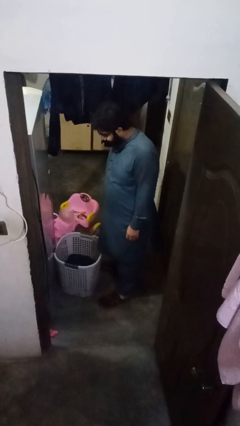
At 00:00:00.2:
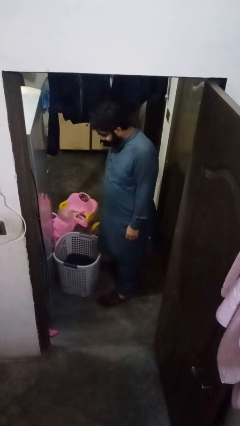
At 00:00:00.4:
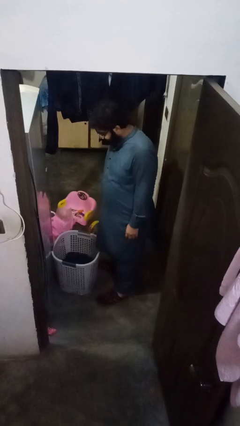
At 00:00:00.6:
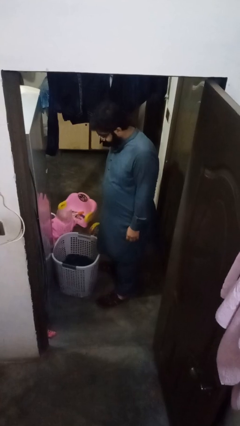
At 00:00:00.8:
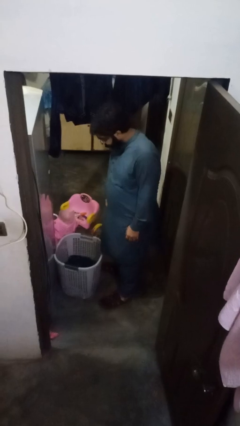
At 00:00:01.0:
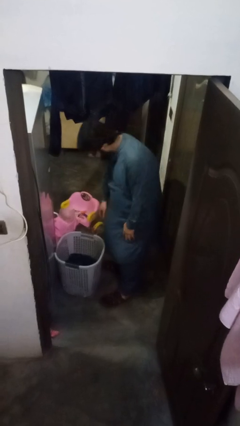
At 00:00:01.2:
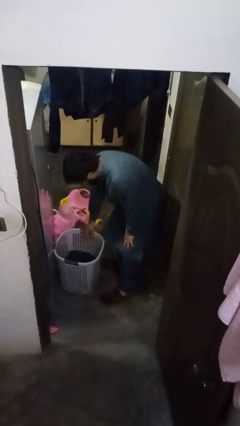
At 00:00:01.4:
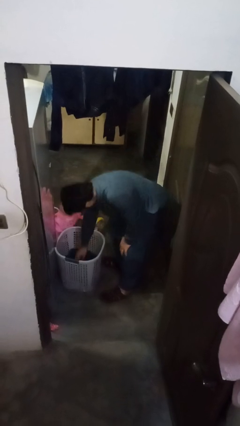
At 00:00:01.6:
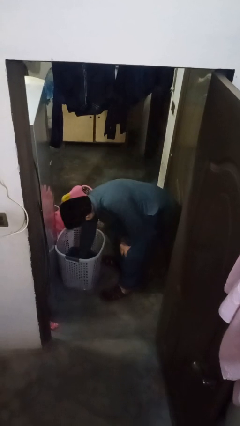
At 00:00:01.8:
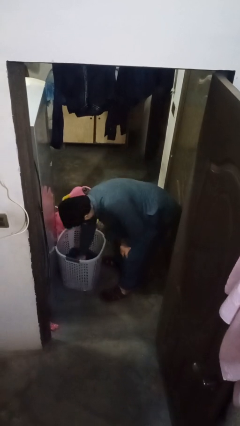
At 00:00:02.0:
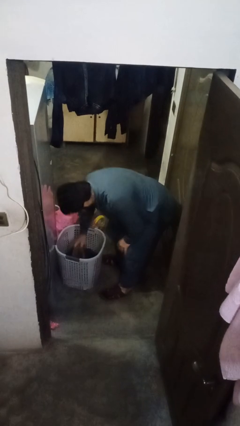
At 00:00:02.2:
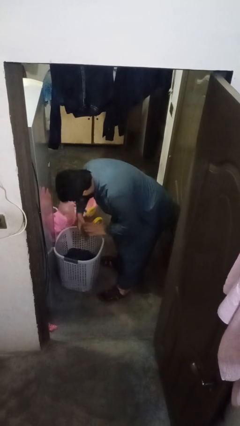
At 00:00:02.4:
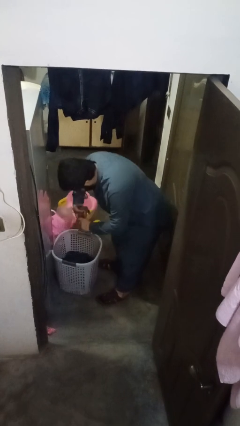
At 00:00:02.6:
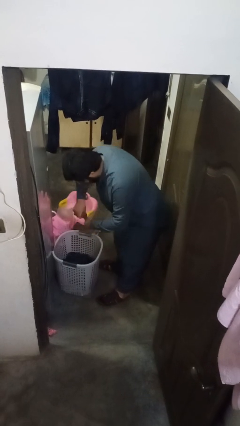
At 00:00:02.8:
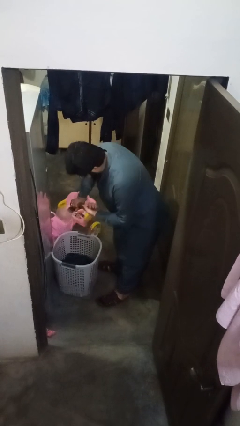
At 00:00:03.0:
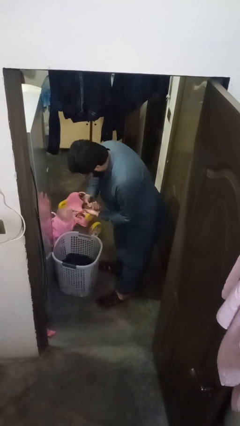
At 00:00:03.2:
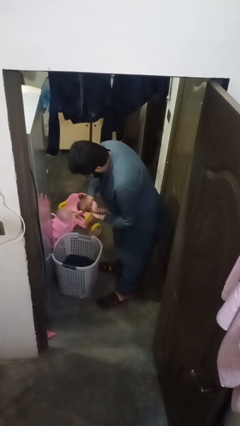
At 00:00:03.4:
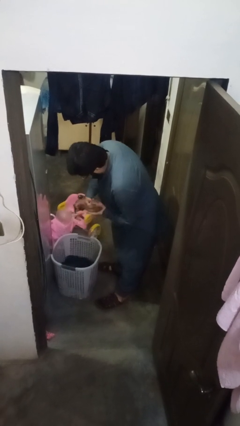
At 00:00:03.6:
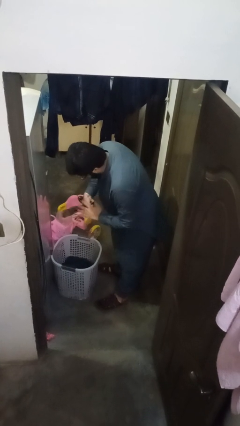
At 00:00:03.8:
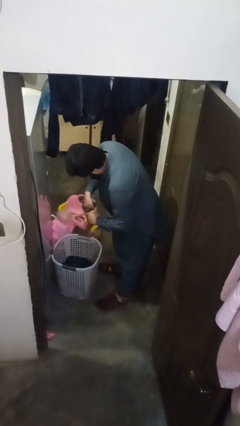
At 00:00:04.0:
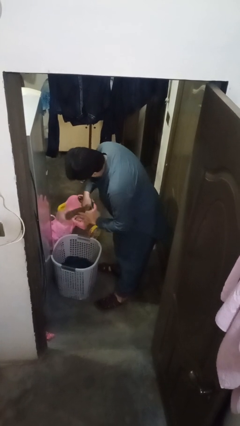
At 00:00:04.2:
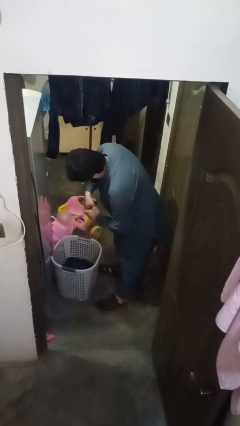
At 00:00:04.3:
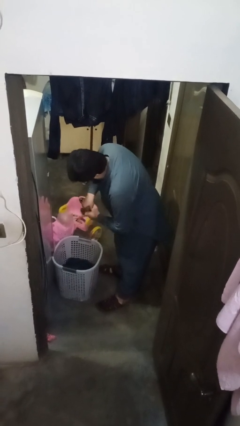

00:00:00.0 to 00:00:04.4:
person folds socks

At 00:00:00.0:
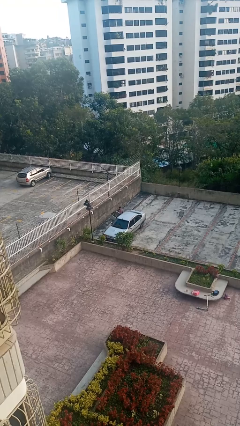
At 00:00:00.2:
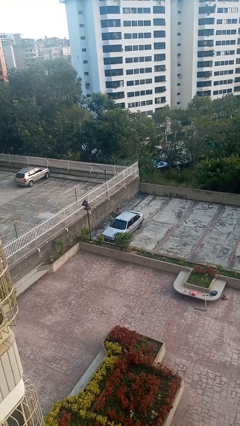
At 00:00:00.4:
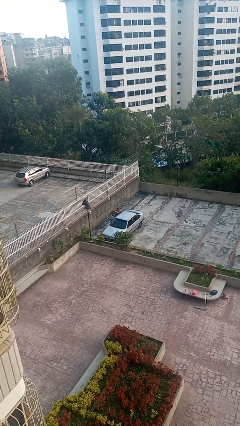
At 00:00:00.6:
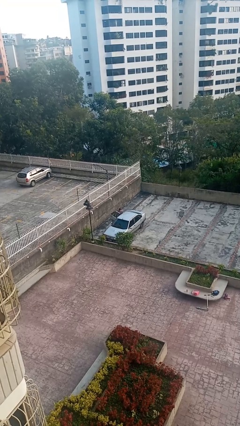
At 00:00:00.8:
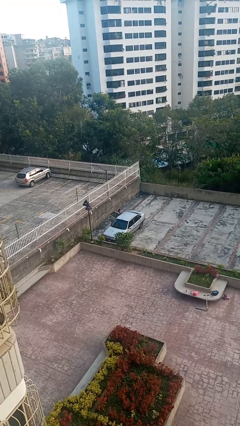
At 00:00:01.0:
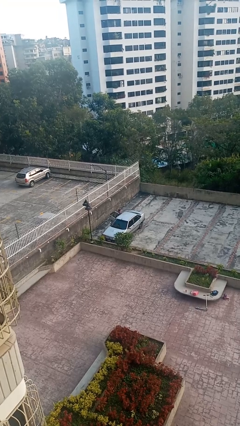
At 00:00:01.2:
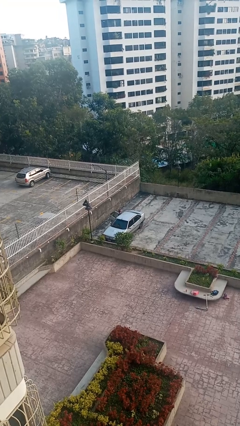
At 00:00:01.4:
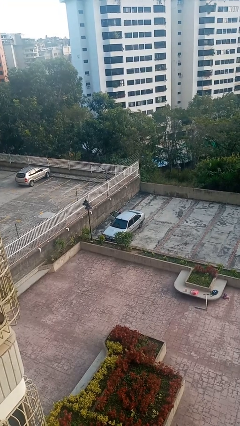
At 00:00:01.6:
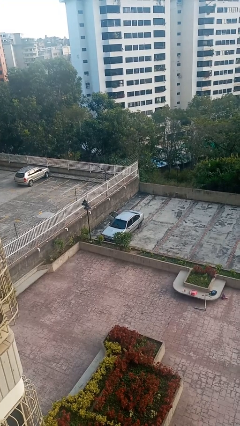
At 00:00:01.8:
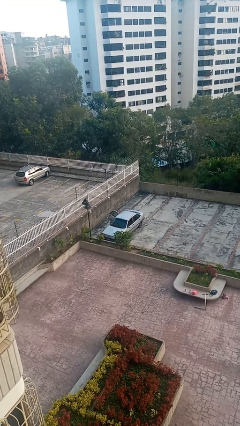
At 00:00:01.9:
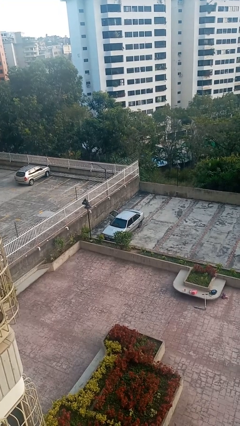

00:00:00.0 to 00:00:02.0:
person enters car

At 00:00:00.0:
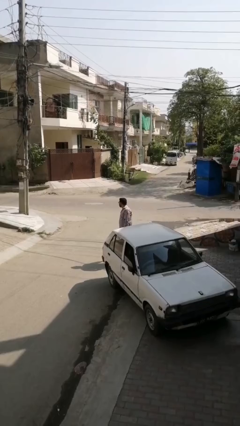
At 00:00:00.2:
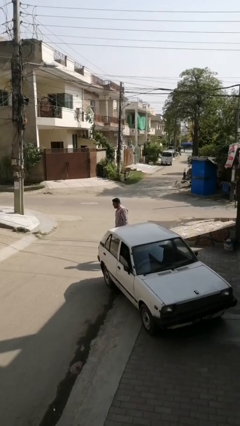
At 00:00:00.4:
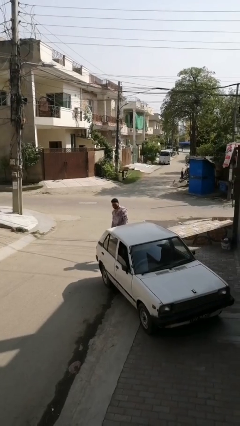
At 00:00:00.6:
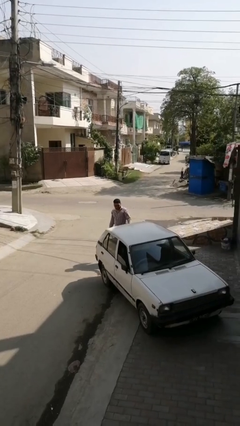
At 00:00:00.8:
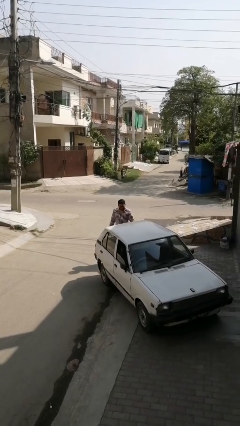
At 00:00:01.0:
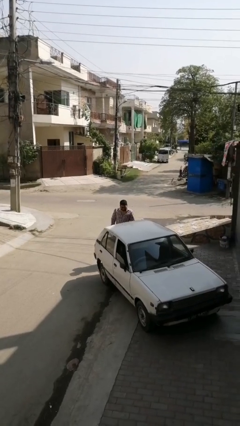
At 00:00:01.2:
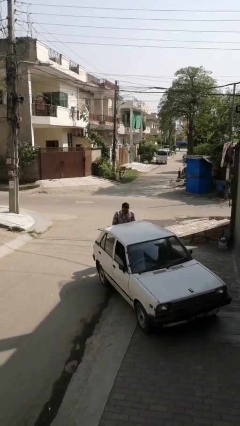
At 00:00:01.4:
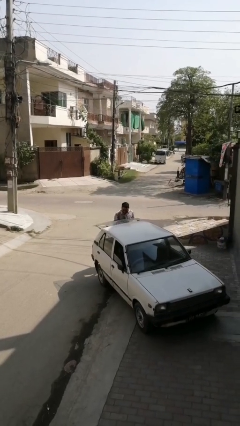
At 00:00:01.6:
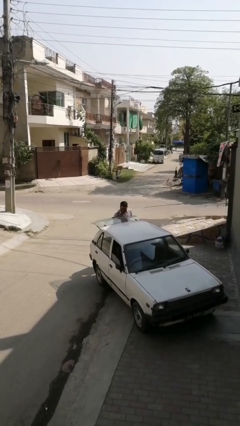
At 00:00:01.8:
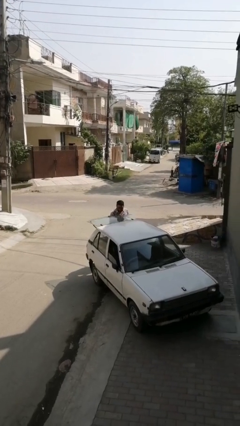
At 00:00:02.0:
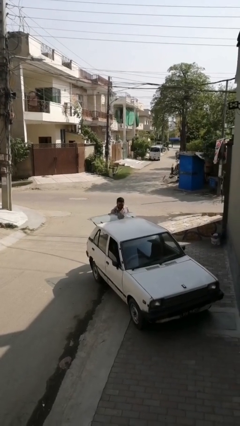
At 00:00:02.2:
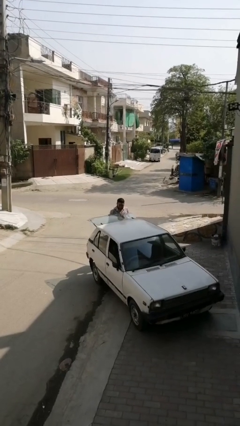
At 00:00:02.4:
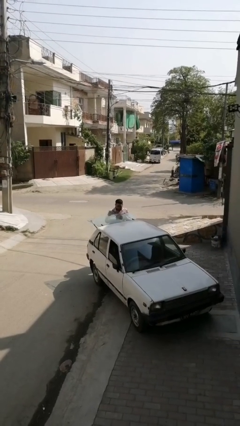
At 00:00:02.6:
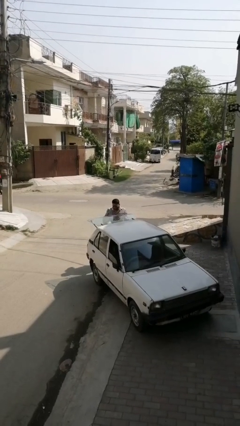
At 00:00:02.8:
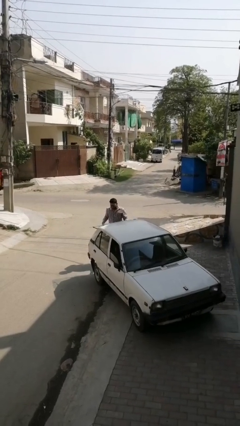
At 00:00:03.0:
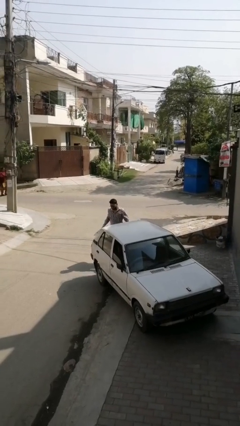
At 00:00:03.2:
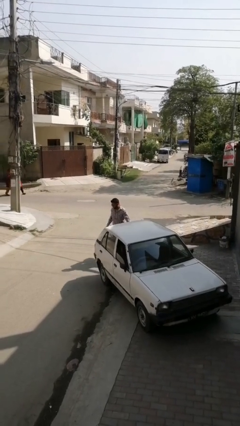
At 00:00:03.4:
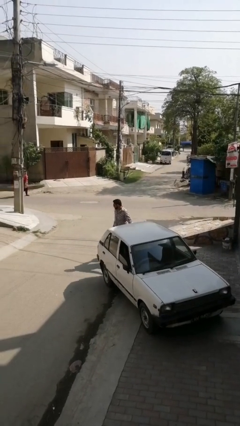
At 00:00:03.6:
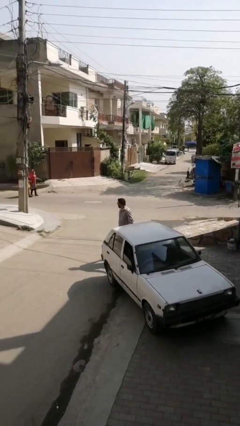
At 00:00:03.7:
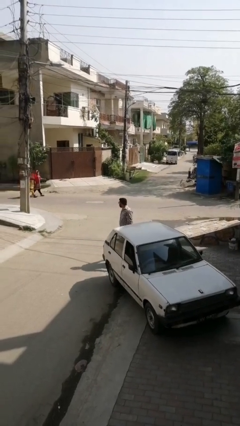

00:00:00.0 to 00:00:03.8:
person unloads car

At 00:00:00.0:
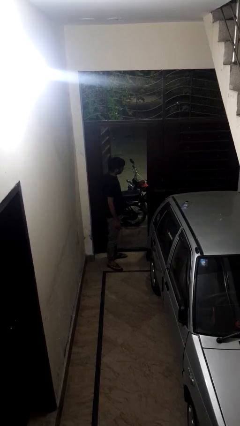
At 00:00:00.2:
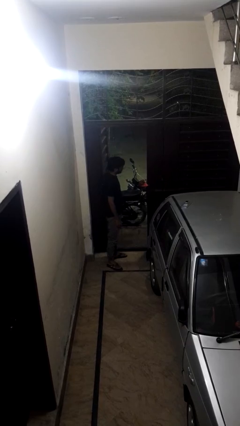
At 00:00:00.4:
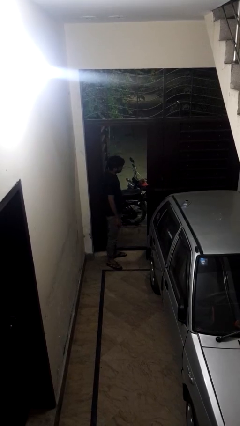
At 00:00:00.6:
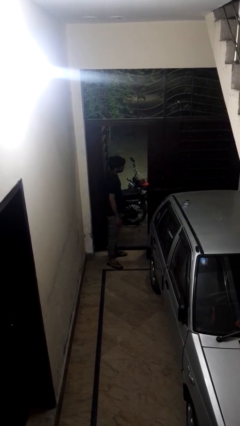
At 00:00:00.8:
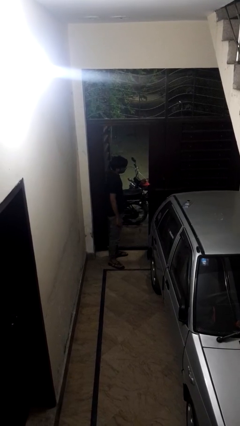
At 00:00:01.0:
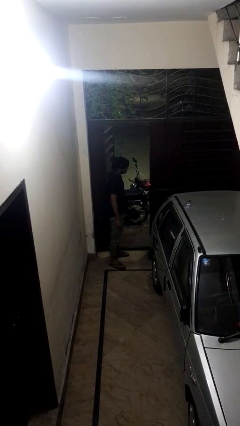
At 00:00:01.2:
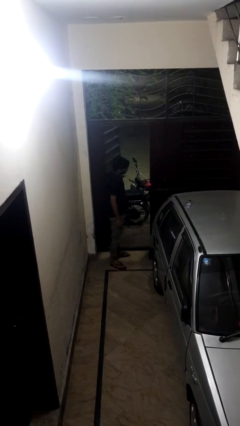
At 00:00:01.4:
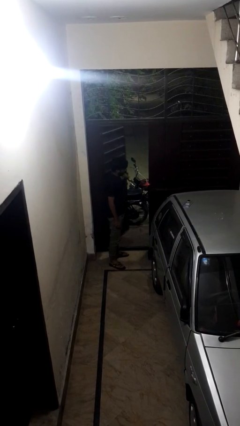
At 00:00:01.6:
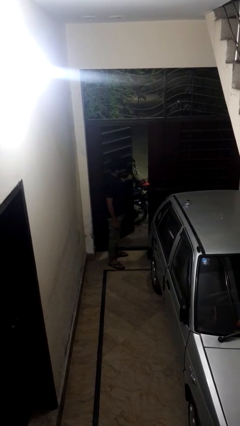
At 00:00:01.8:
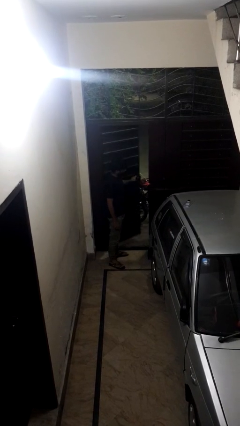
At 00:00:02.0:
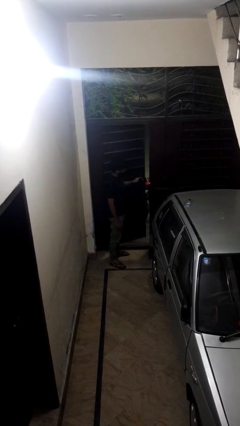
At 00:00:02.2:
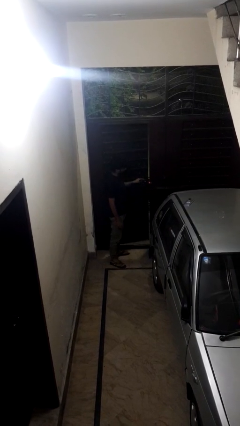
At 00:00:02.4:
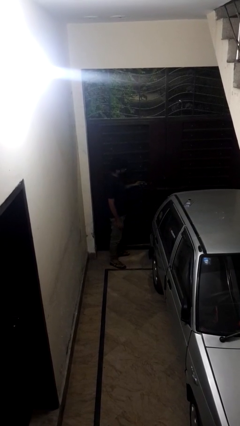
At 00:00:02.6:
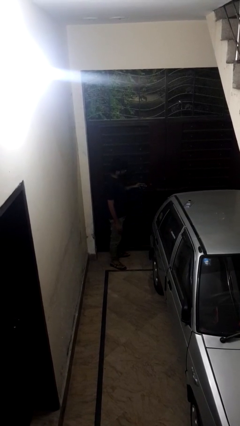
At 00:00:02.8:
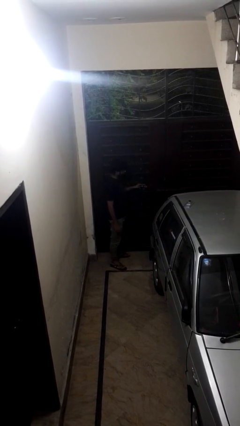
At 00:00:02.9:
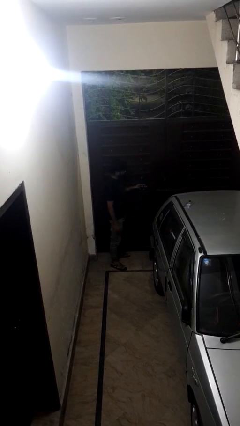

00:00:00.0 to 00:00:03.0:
person closes gate

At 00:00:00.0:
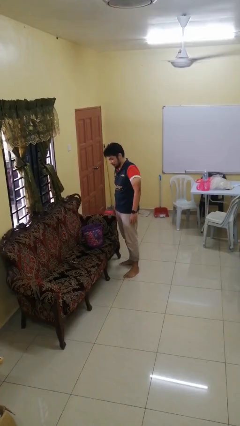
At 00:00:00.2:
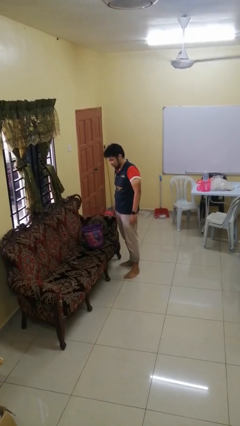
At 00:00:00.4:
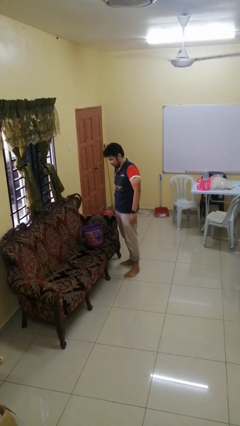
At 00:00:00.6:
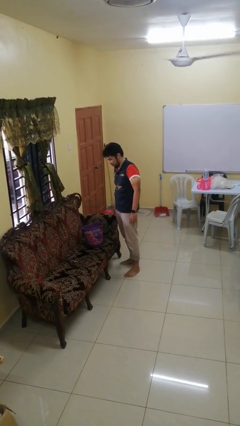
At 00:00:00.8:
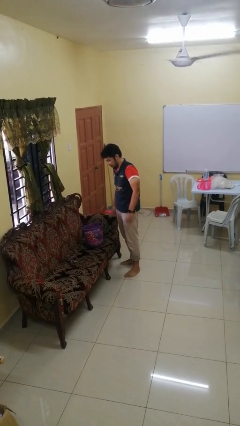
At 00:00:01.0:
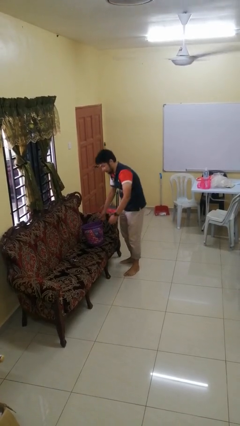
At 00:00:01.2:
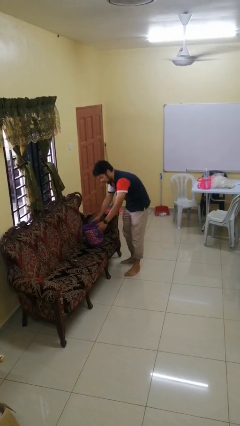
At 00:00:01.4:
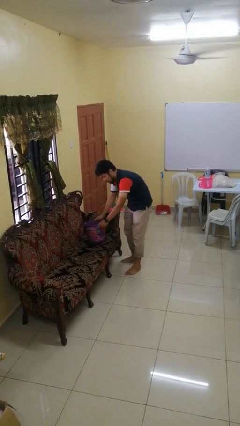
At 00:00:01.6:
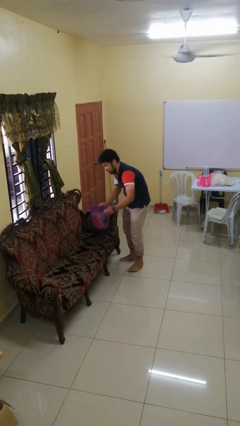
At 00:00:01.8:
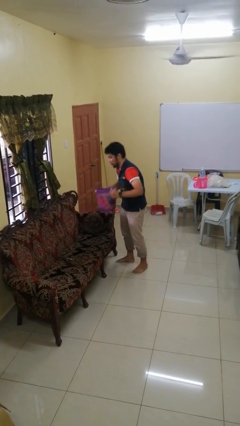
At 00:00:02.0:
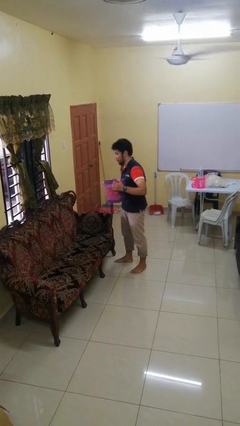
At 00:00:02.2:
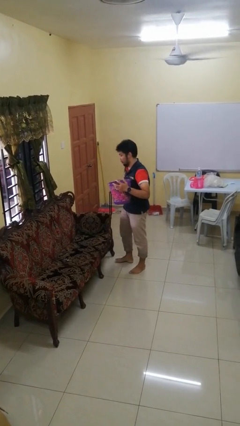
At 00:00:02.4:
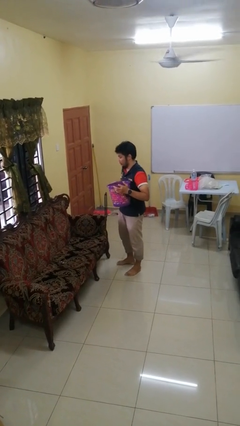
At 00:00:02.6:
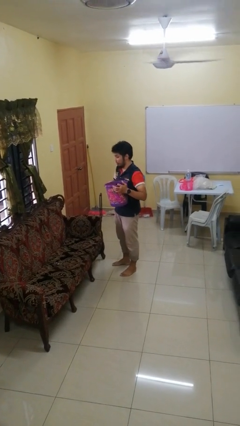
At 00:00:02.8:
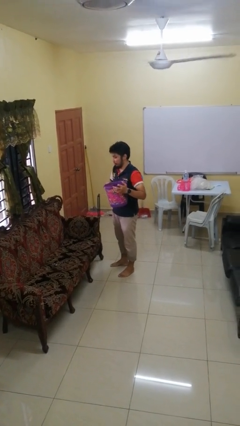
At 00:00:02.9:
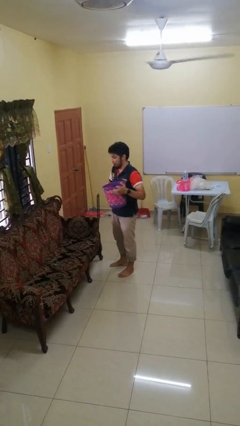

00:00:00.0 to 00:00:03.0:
person picks up object from couch

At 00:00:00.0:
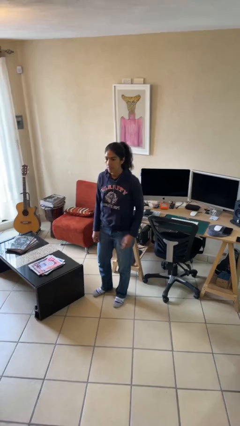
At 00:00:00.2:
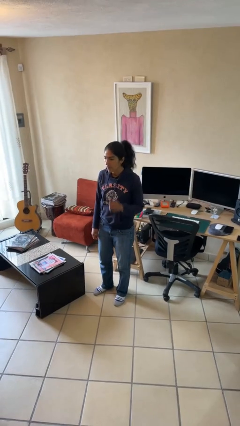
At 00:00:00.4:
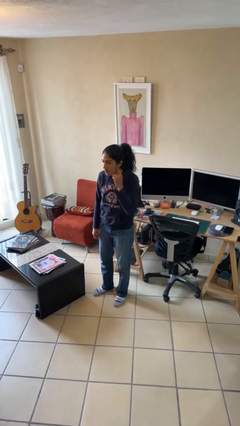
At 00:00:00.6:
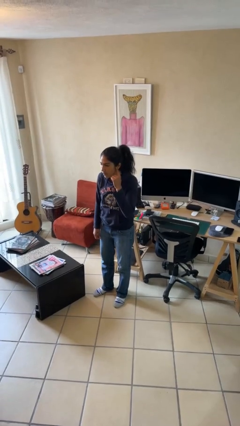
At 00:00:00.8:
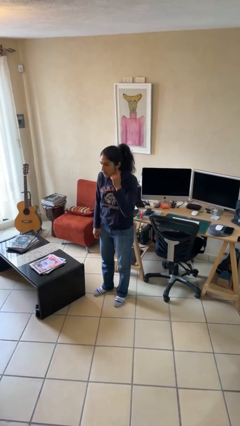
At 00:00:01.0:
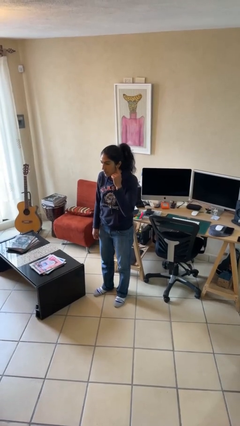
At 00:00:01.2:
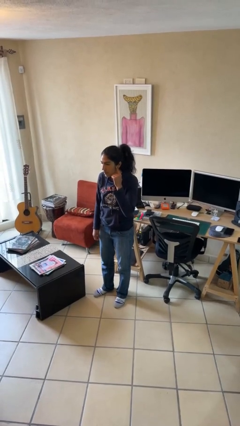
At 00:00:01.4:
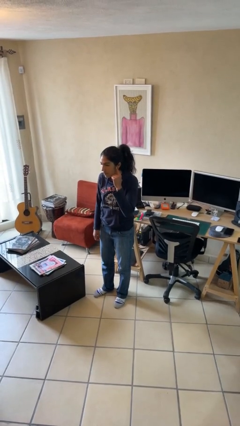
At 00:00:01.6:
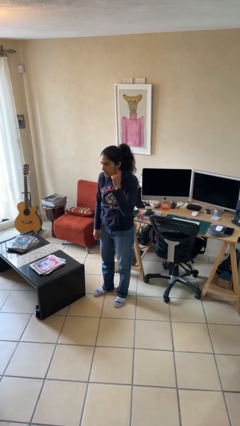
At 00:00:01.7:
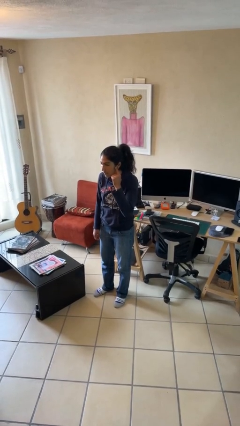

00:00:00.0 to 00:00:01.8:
person gestures listen closely
